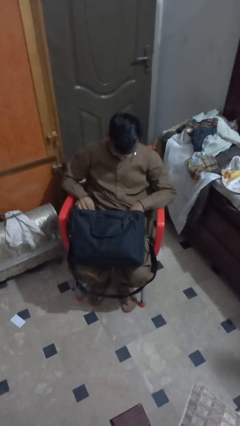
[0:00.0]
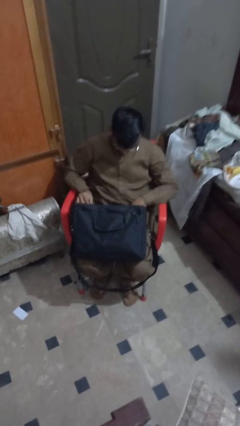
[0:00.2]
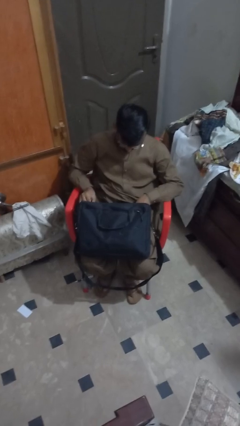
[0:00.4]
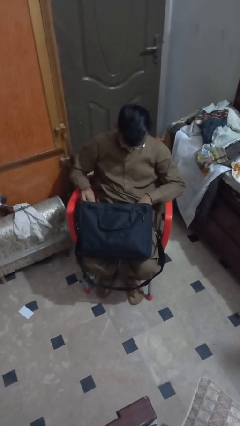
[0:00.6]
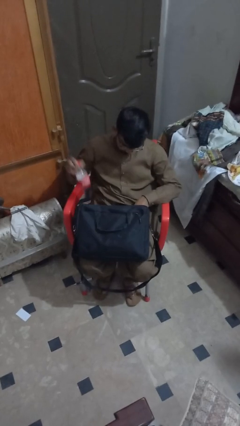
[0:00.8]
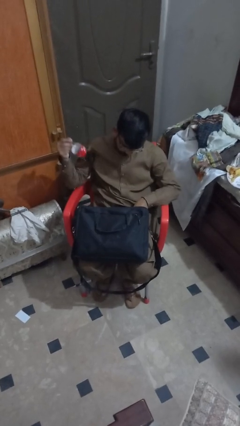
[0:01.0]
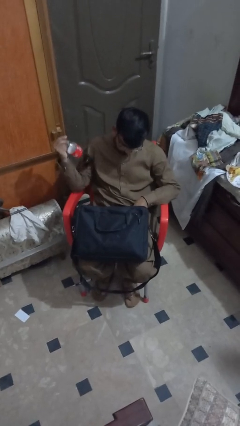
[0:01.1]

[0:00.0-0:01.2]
person takes object from bag

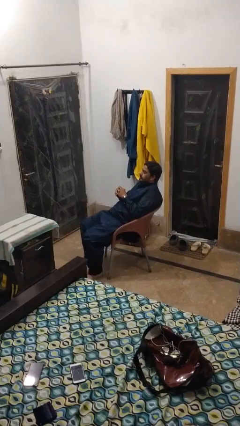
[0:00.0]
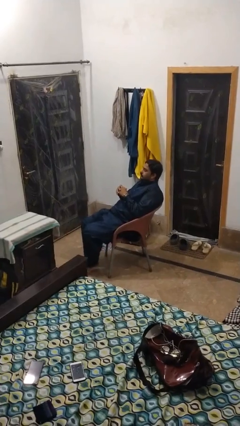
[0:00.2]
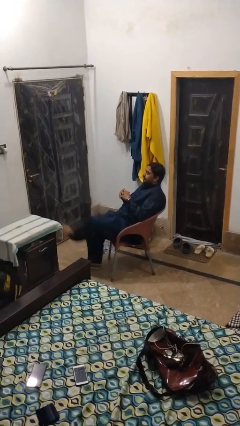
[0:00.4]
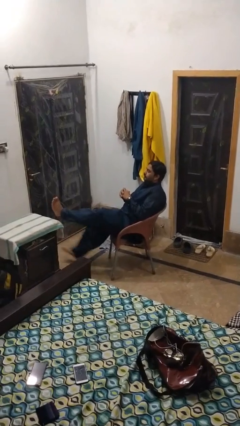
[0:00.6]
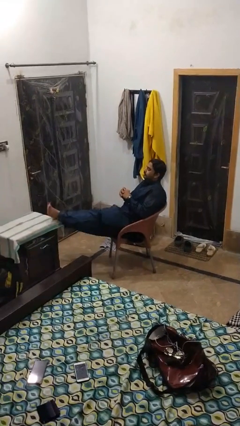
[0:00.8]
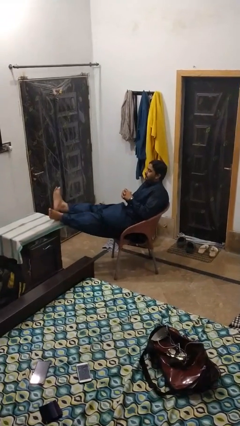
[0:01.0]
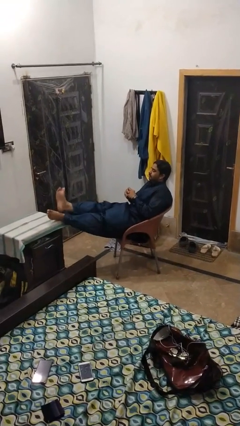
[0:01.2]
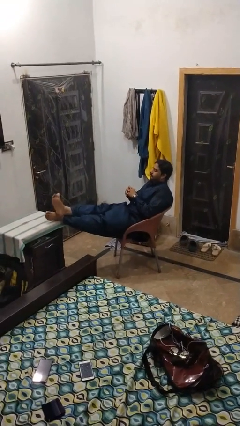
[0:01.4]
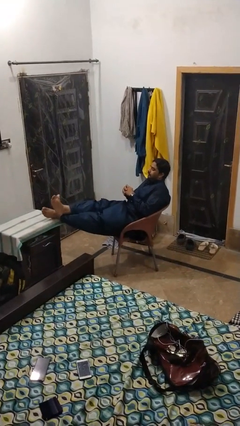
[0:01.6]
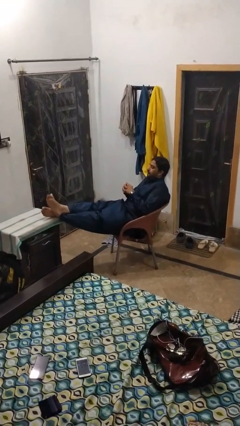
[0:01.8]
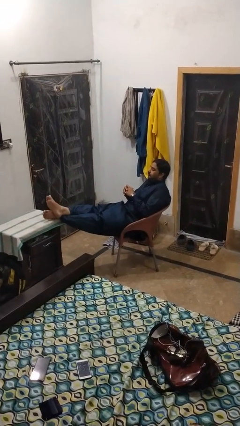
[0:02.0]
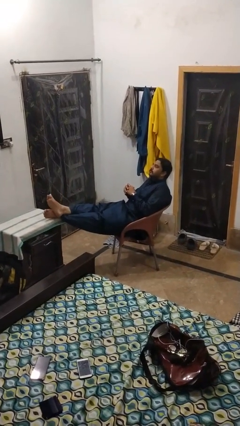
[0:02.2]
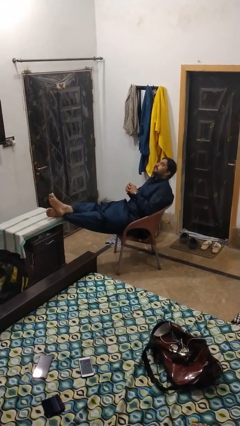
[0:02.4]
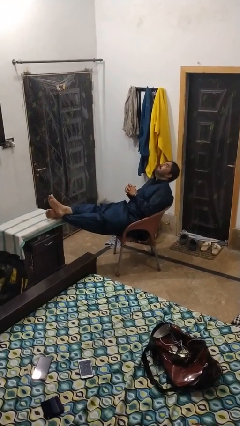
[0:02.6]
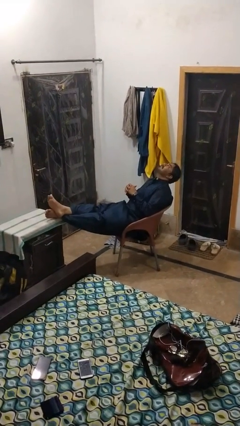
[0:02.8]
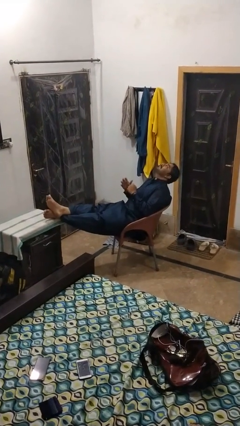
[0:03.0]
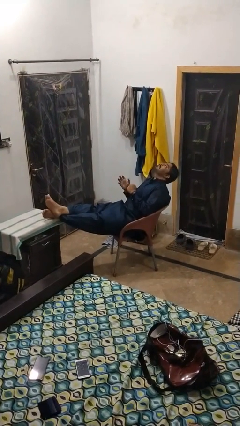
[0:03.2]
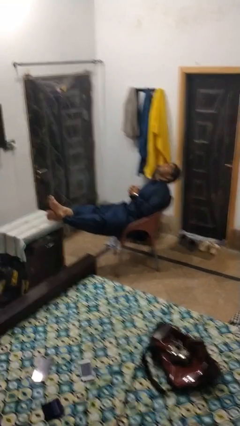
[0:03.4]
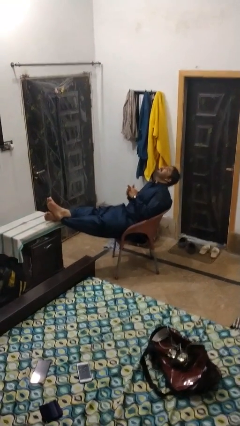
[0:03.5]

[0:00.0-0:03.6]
person puts feet up

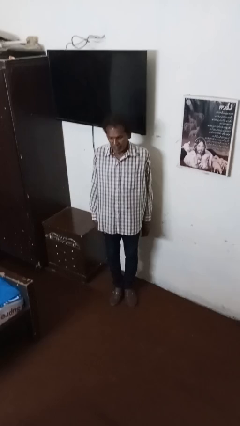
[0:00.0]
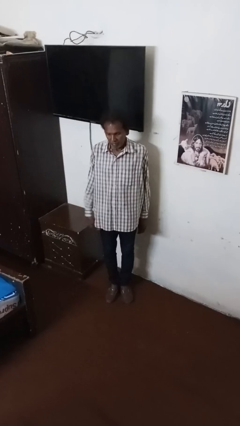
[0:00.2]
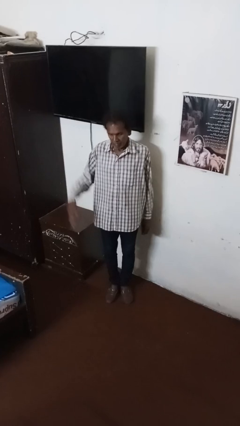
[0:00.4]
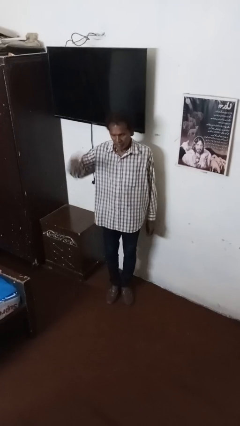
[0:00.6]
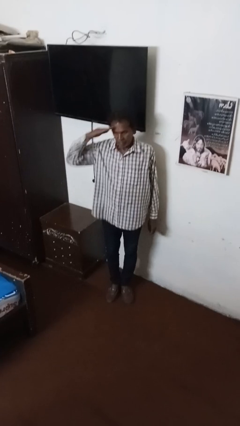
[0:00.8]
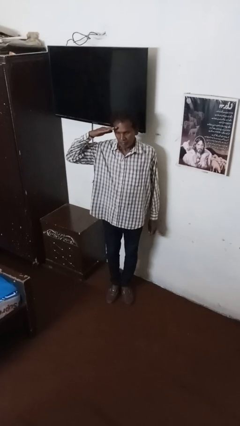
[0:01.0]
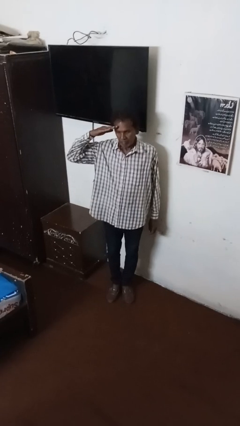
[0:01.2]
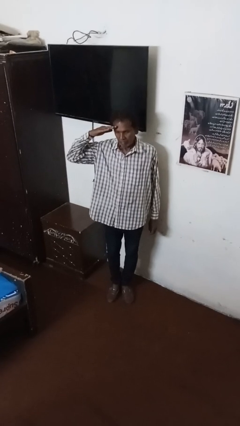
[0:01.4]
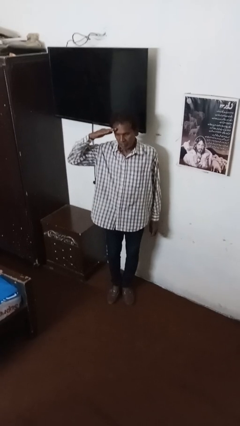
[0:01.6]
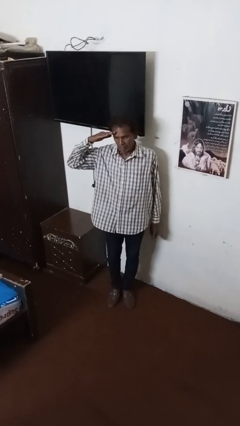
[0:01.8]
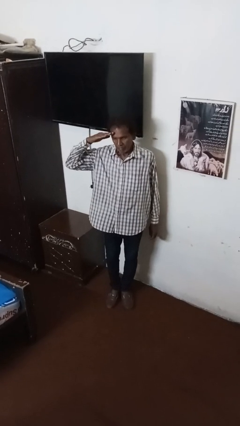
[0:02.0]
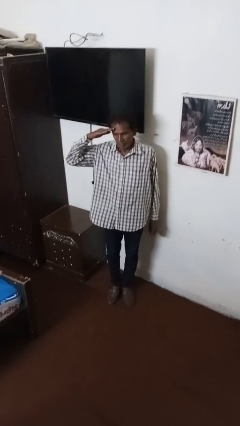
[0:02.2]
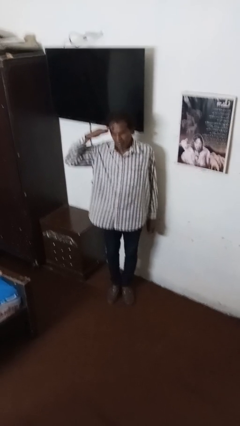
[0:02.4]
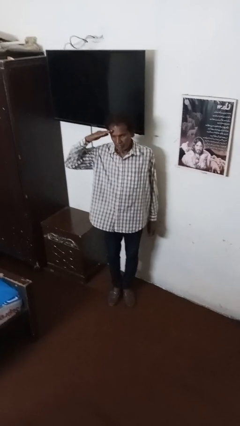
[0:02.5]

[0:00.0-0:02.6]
person salutes

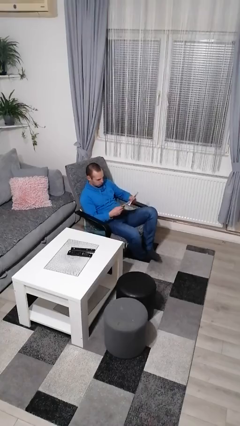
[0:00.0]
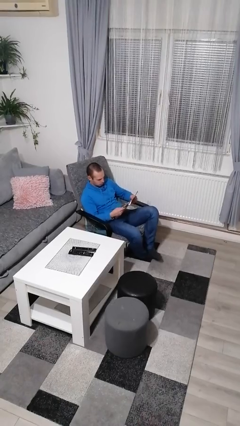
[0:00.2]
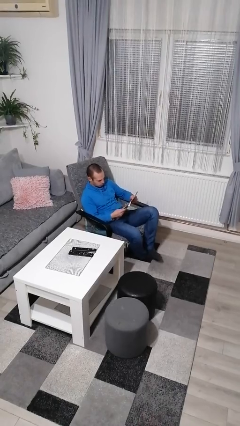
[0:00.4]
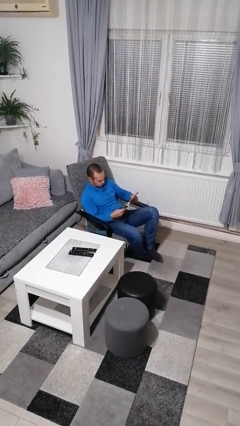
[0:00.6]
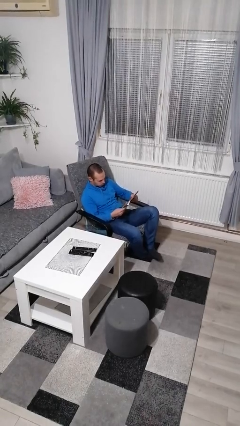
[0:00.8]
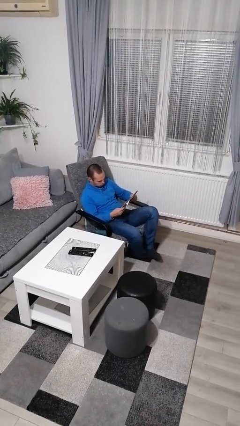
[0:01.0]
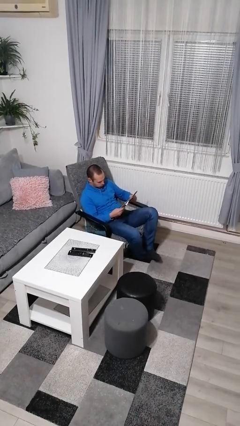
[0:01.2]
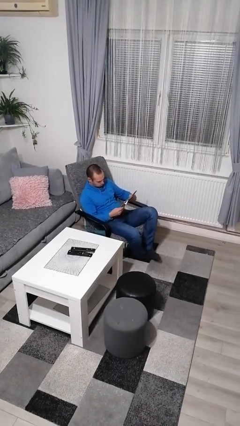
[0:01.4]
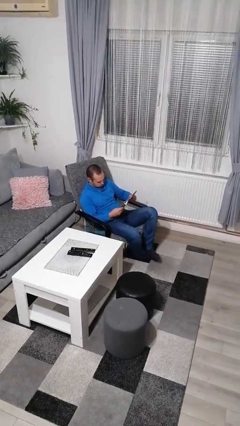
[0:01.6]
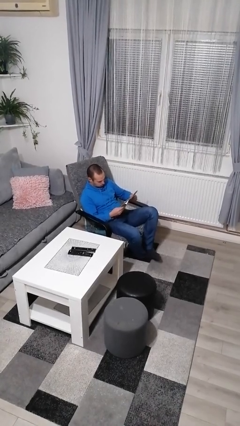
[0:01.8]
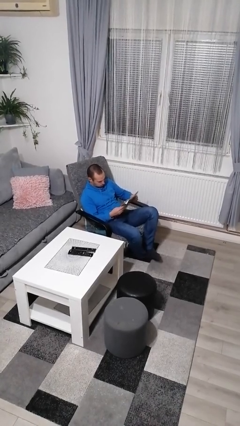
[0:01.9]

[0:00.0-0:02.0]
person reads newspaper

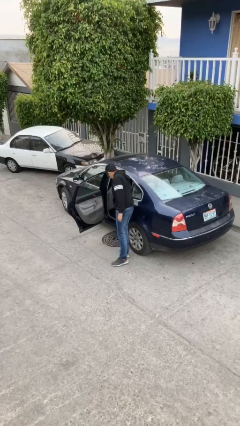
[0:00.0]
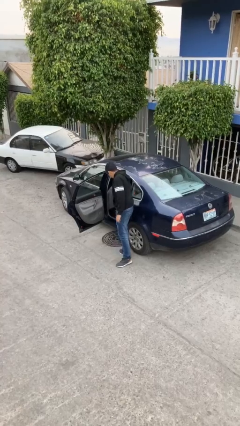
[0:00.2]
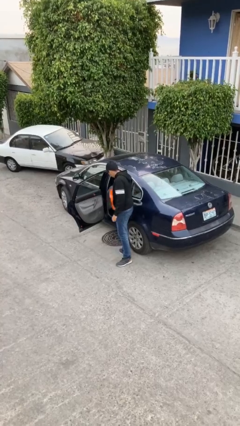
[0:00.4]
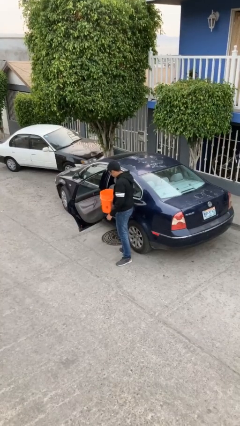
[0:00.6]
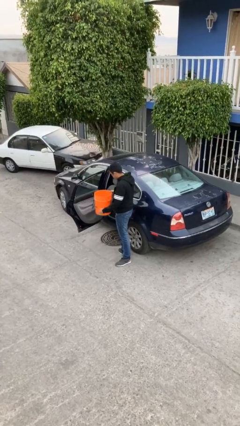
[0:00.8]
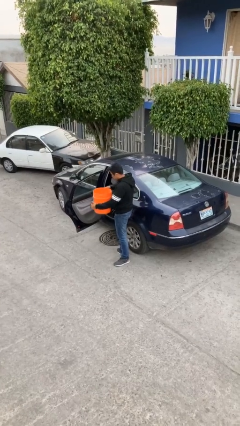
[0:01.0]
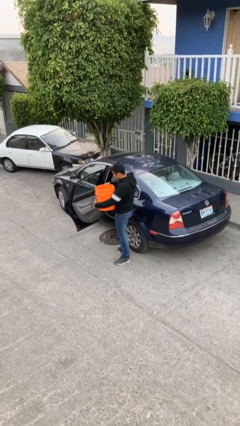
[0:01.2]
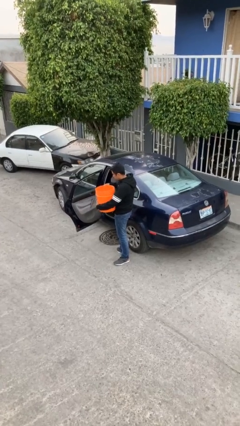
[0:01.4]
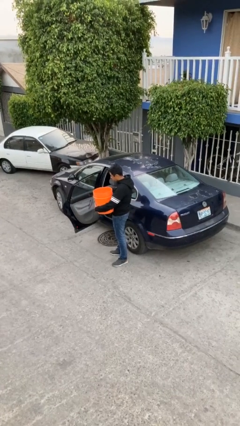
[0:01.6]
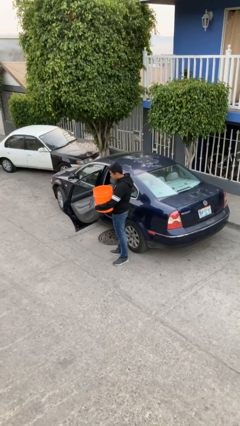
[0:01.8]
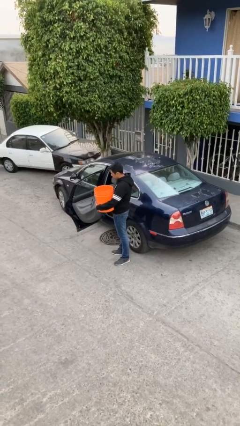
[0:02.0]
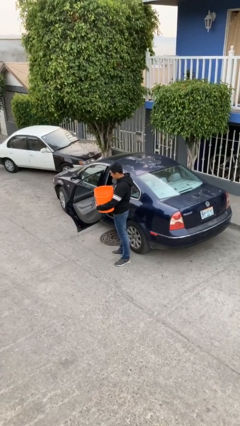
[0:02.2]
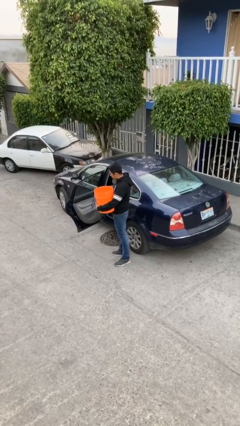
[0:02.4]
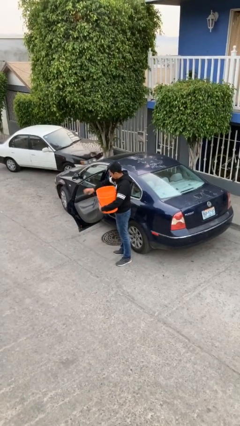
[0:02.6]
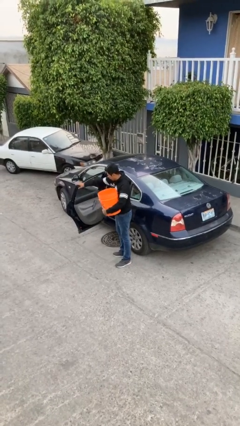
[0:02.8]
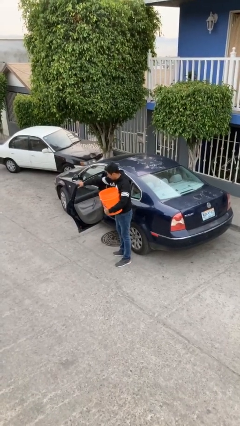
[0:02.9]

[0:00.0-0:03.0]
person unloads car

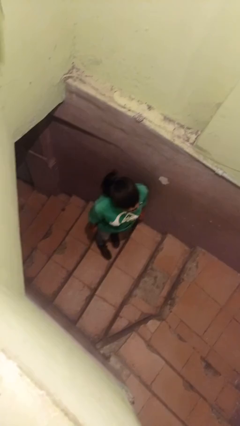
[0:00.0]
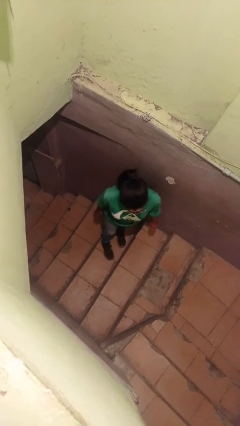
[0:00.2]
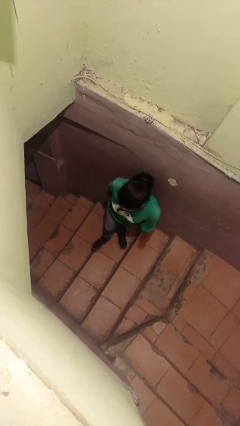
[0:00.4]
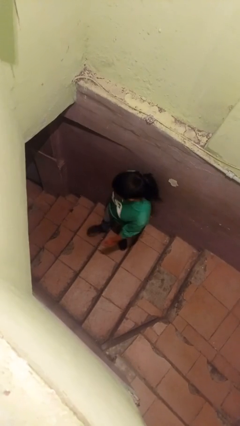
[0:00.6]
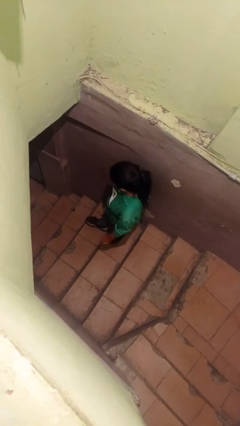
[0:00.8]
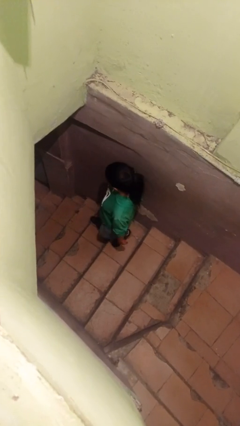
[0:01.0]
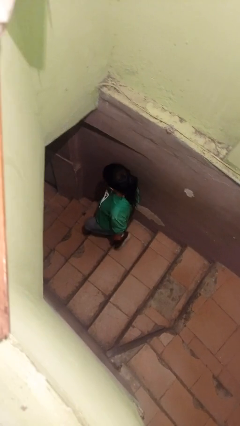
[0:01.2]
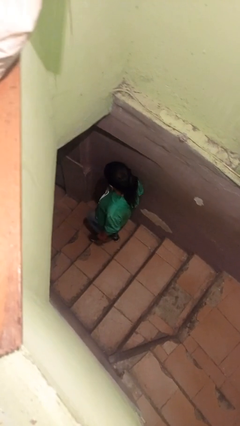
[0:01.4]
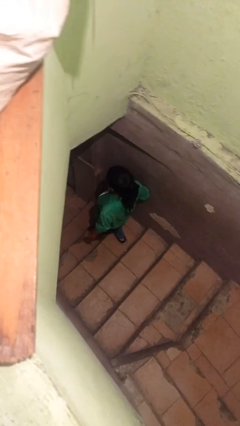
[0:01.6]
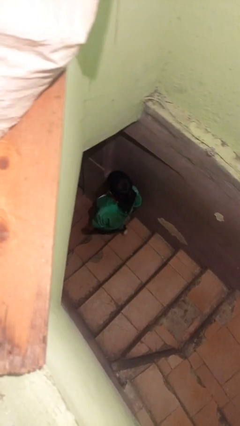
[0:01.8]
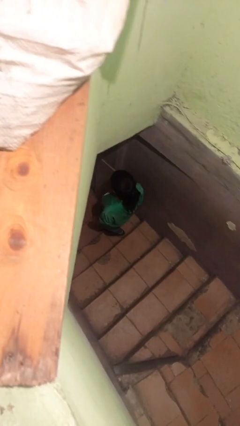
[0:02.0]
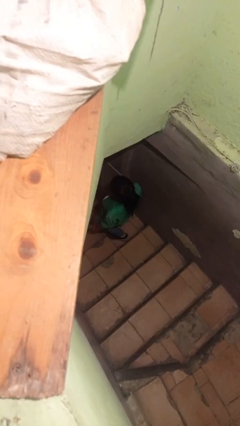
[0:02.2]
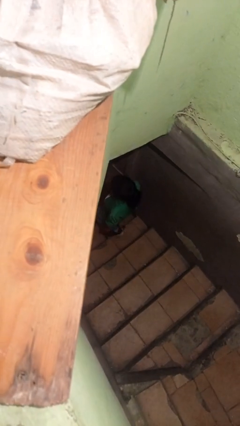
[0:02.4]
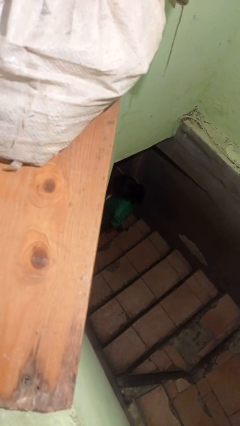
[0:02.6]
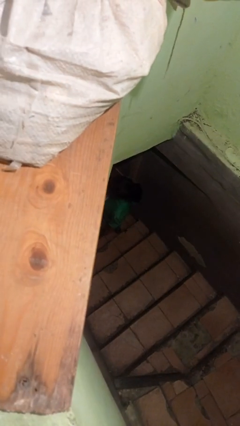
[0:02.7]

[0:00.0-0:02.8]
person climbs down stairs

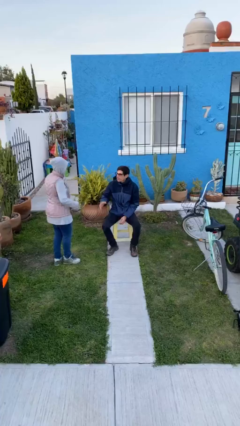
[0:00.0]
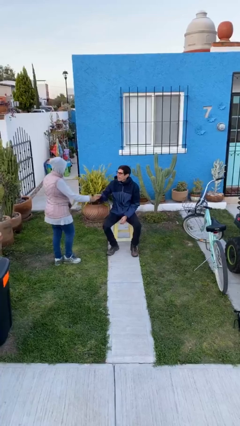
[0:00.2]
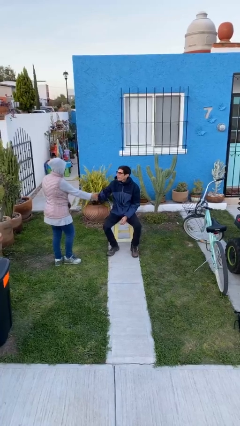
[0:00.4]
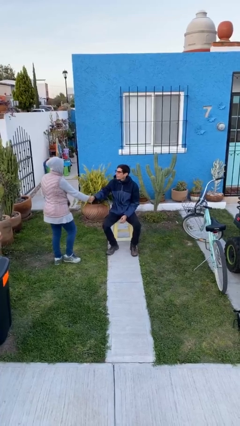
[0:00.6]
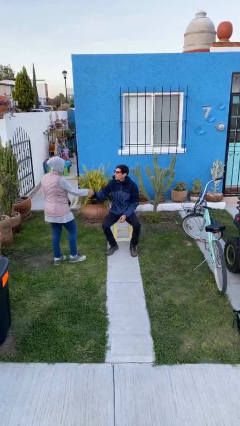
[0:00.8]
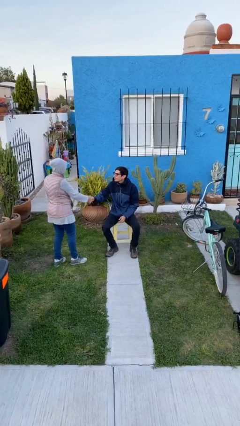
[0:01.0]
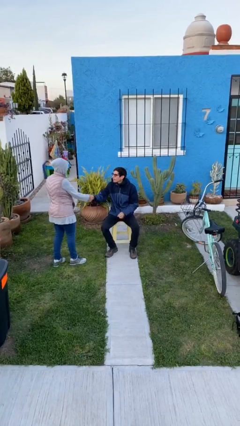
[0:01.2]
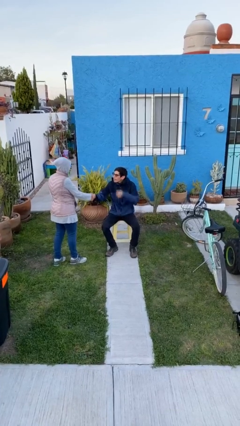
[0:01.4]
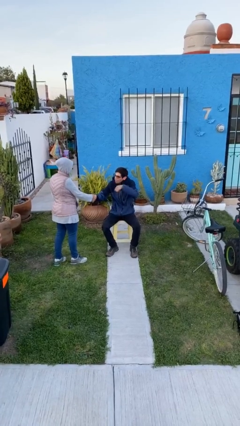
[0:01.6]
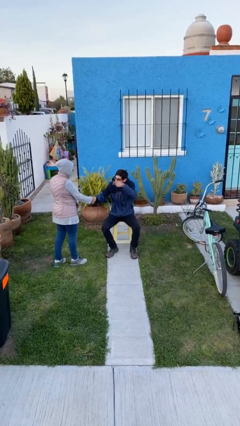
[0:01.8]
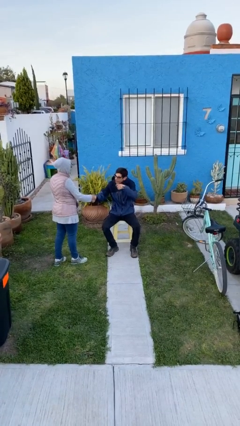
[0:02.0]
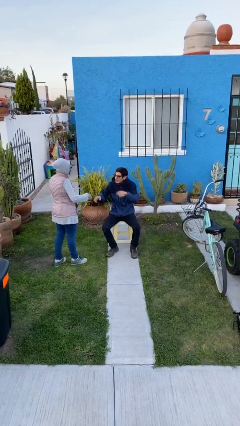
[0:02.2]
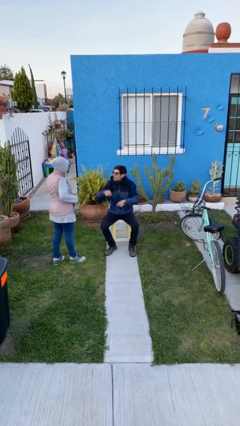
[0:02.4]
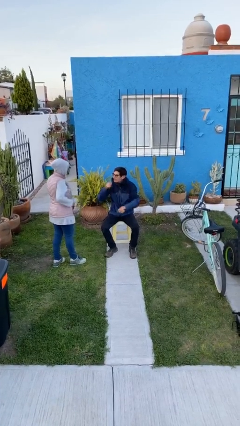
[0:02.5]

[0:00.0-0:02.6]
person shakes hand
